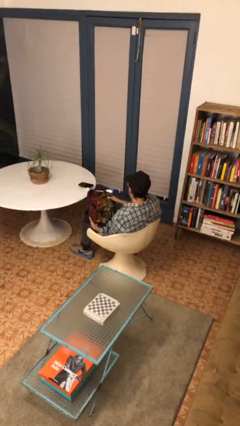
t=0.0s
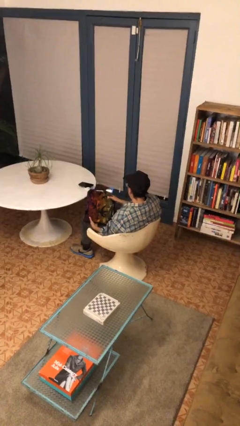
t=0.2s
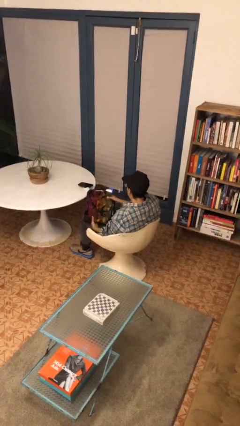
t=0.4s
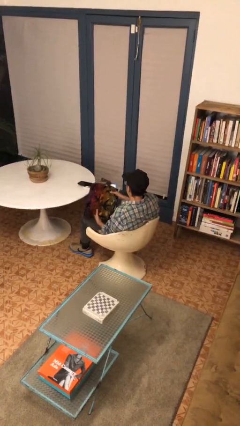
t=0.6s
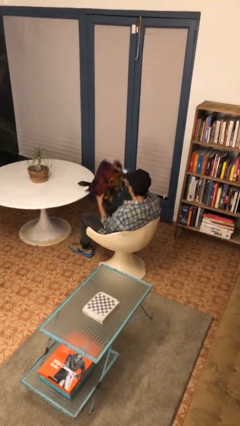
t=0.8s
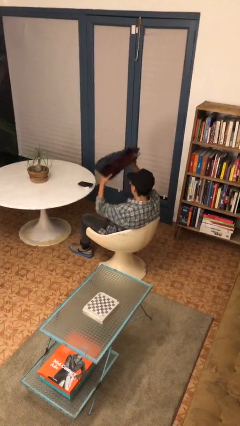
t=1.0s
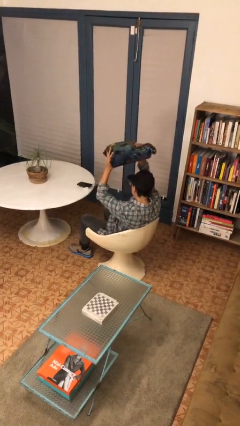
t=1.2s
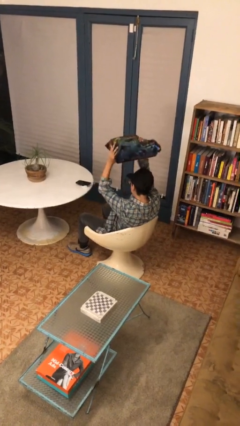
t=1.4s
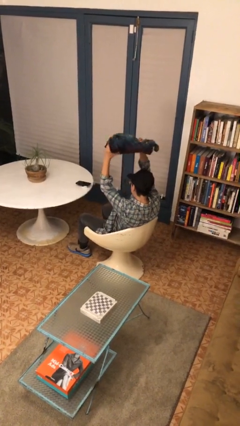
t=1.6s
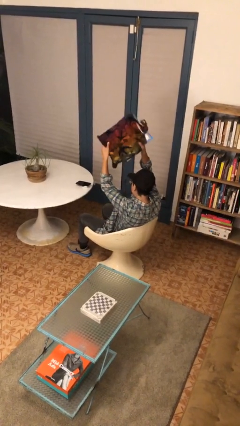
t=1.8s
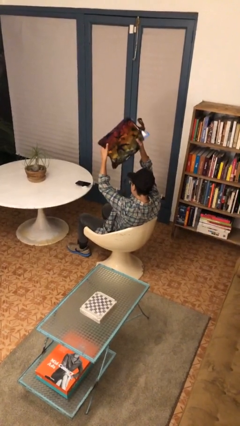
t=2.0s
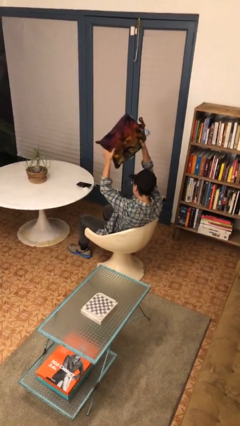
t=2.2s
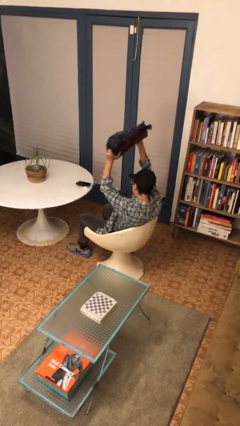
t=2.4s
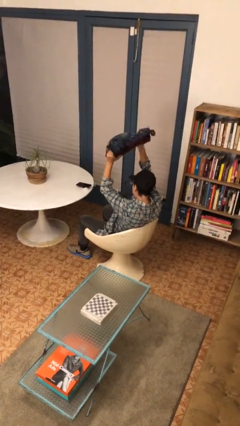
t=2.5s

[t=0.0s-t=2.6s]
person holds object above head

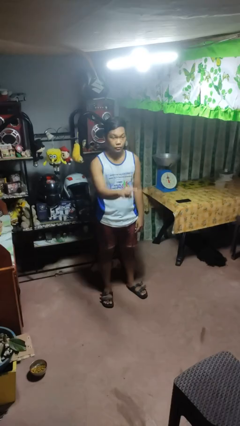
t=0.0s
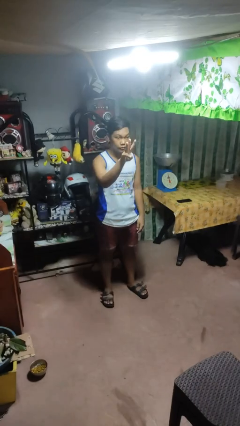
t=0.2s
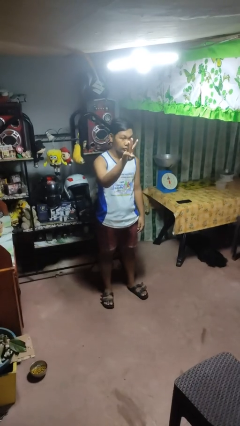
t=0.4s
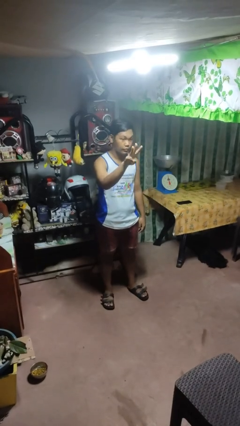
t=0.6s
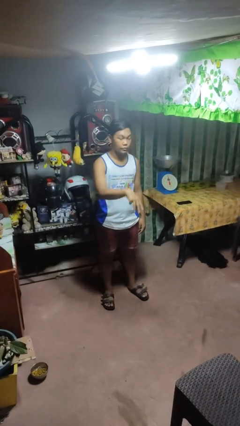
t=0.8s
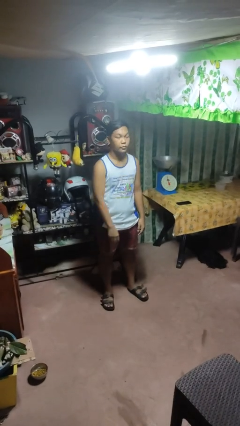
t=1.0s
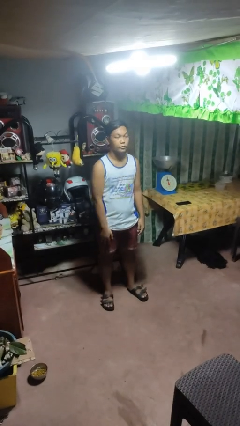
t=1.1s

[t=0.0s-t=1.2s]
person gestures number three

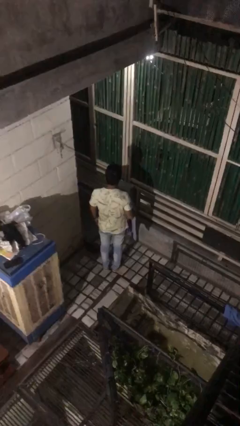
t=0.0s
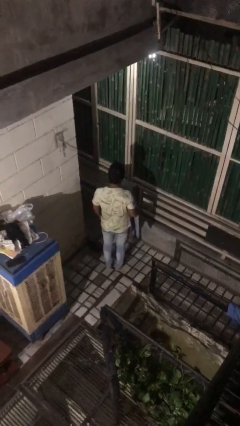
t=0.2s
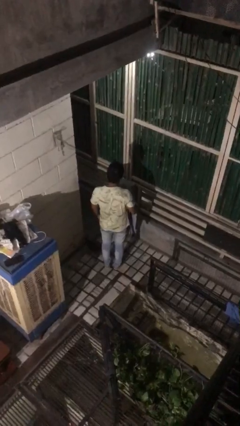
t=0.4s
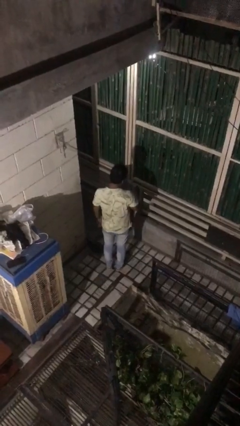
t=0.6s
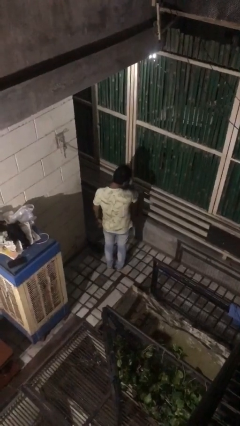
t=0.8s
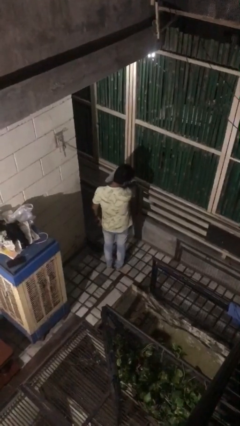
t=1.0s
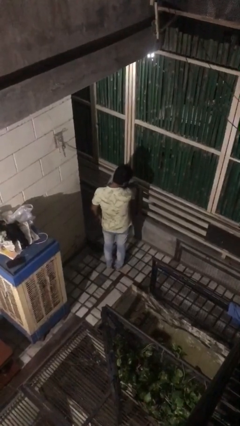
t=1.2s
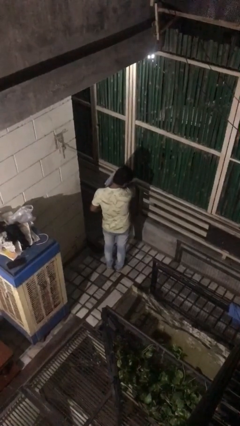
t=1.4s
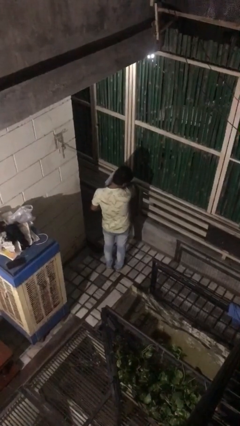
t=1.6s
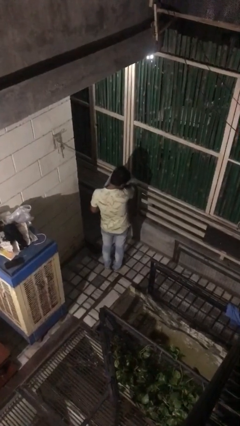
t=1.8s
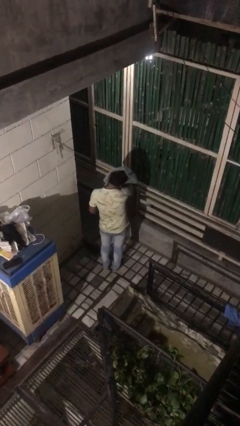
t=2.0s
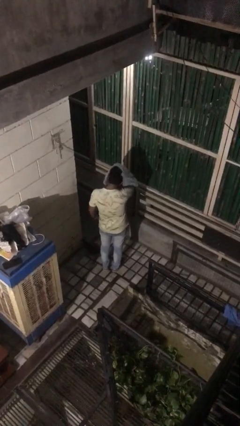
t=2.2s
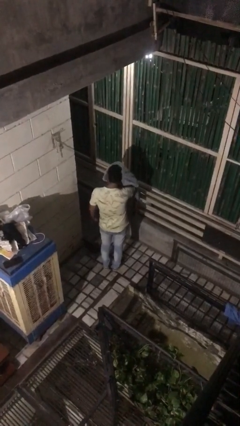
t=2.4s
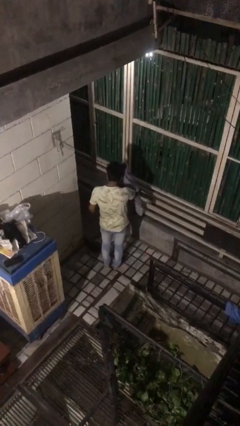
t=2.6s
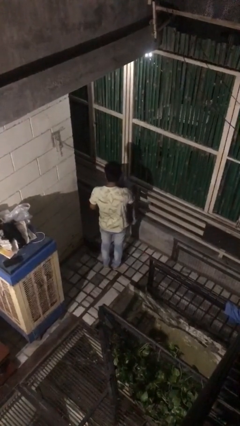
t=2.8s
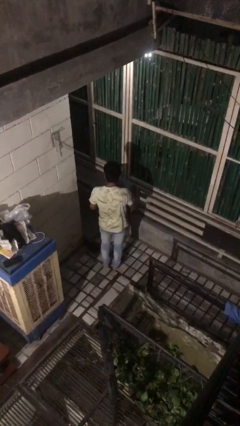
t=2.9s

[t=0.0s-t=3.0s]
person dries hair with towel

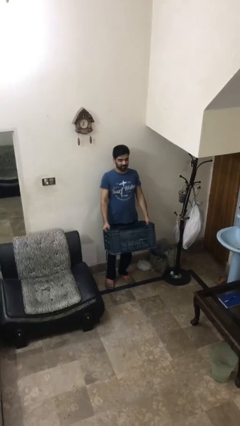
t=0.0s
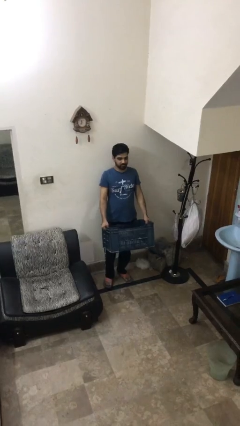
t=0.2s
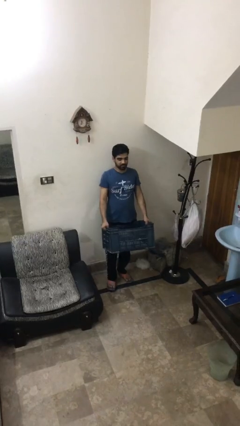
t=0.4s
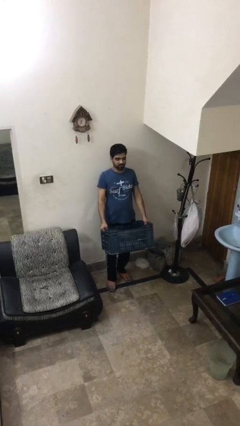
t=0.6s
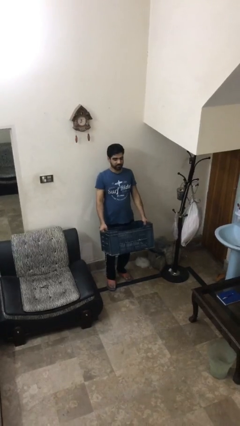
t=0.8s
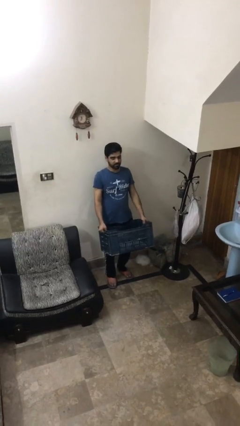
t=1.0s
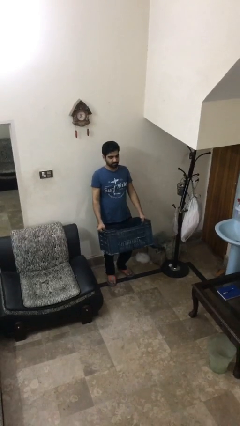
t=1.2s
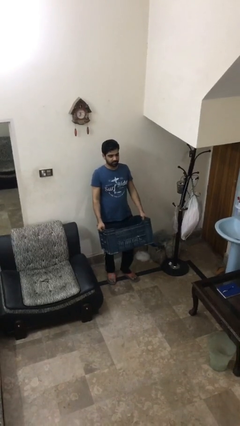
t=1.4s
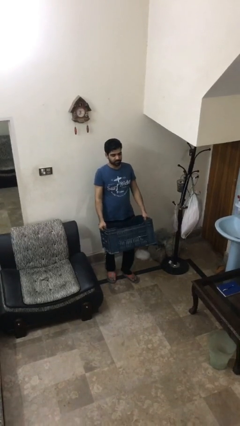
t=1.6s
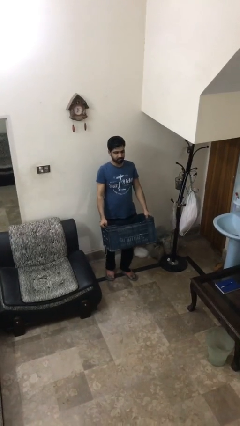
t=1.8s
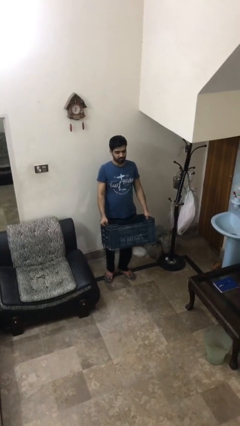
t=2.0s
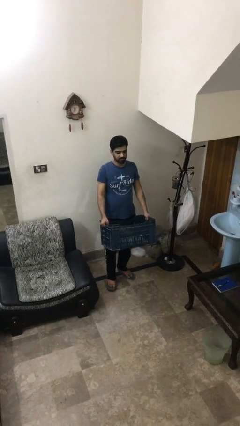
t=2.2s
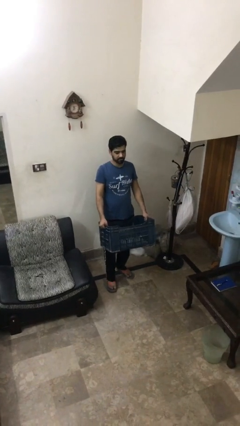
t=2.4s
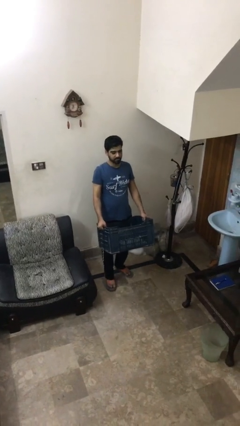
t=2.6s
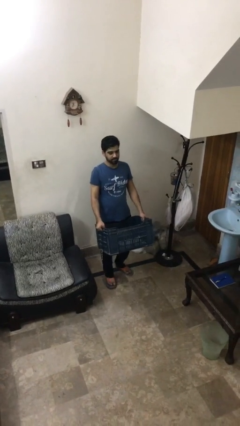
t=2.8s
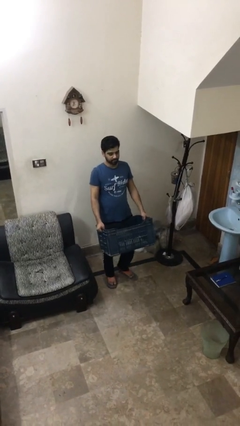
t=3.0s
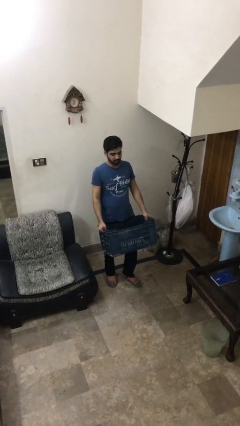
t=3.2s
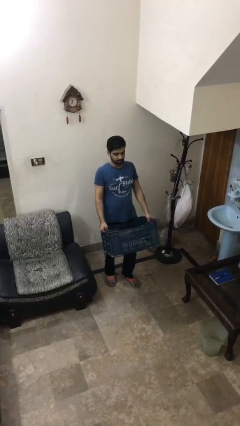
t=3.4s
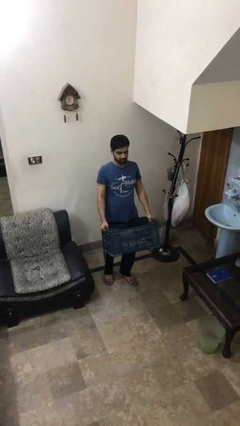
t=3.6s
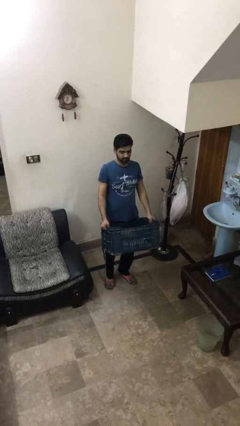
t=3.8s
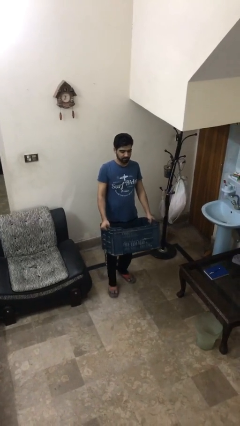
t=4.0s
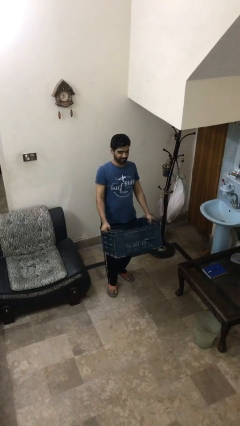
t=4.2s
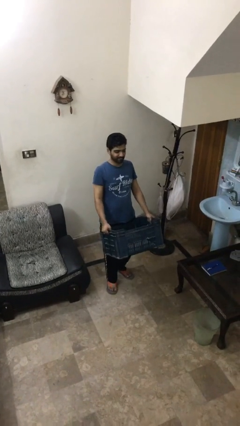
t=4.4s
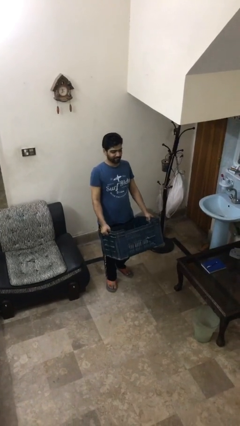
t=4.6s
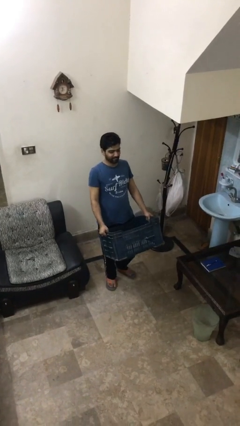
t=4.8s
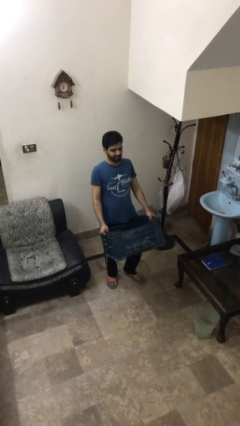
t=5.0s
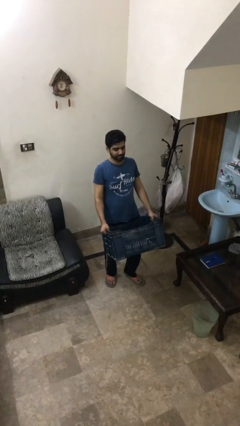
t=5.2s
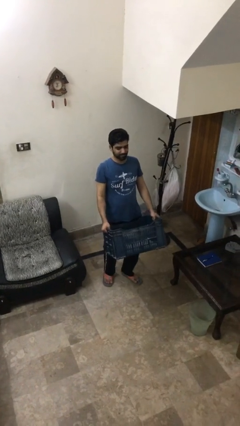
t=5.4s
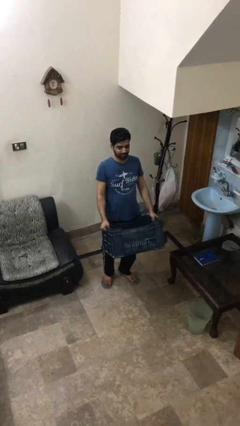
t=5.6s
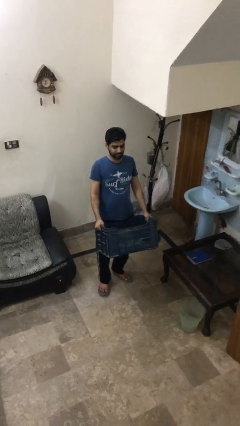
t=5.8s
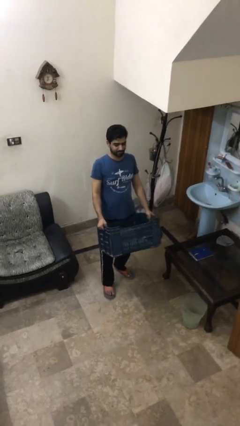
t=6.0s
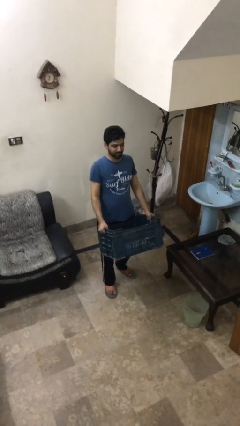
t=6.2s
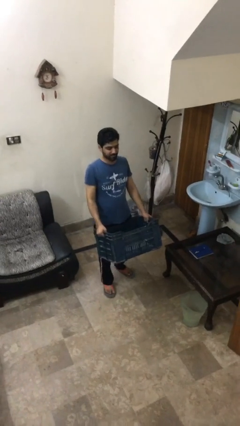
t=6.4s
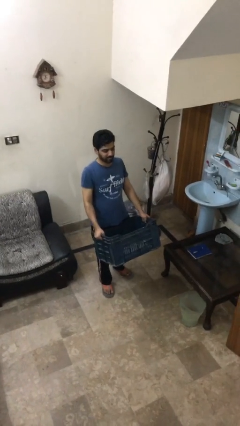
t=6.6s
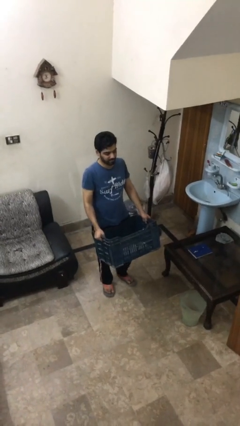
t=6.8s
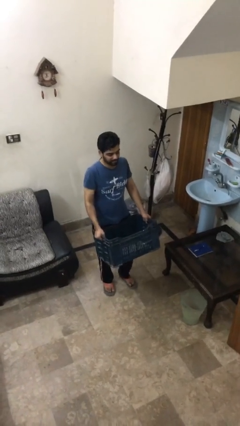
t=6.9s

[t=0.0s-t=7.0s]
person carries heavy object

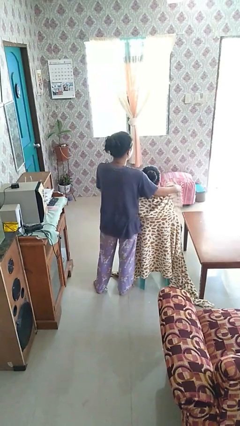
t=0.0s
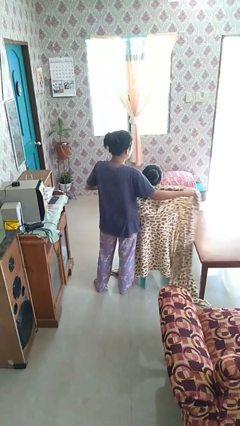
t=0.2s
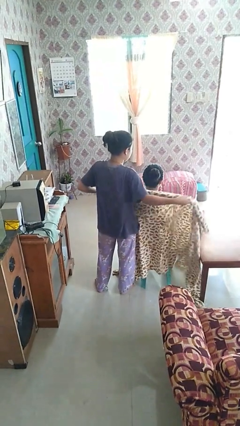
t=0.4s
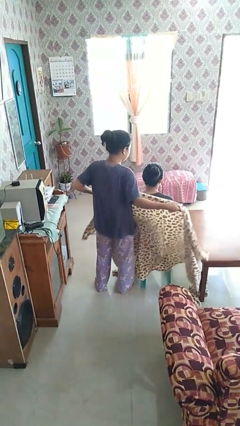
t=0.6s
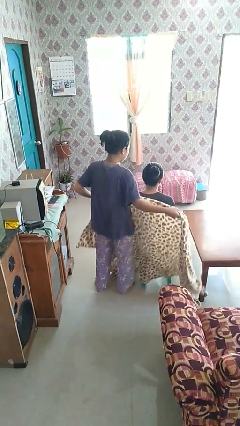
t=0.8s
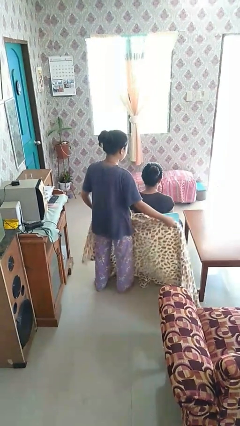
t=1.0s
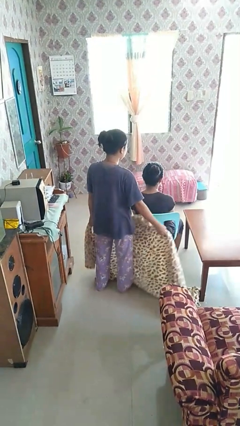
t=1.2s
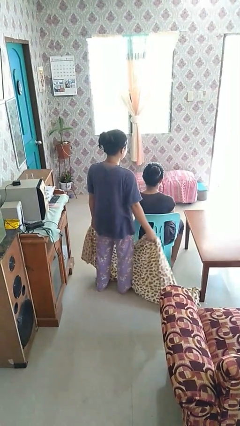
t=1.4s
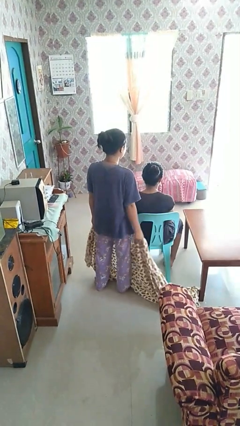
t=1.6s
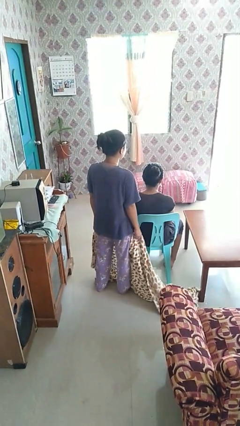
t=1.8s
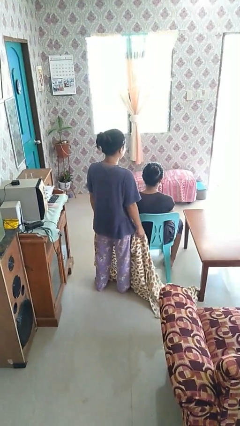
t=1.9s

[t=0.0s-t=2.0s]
person uncovers friend with blanket

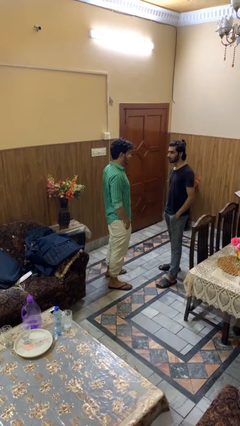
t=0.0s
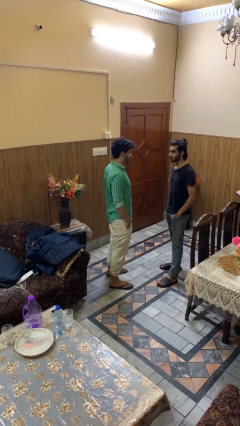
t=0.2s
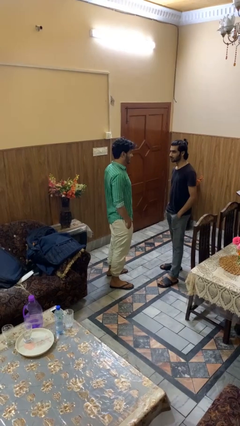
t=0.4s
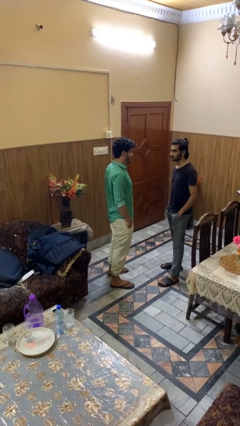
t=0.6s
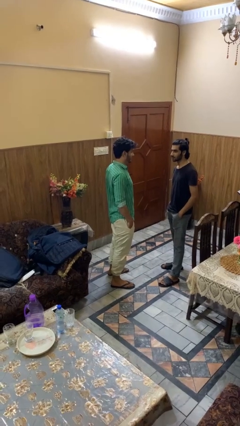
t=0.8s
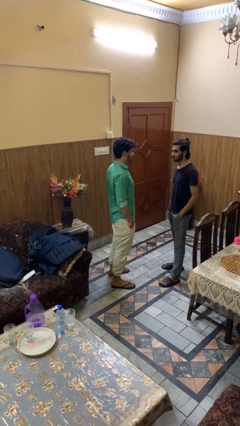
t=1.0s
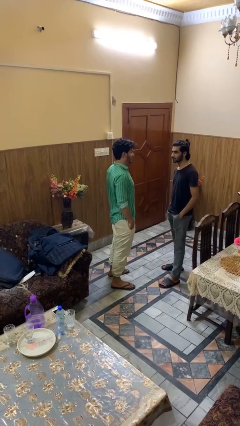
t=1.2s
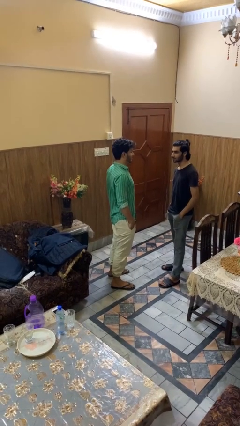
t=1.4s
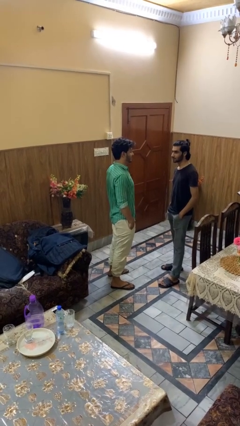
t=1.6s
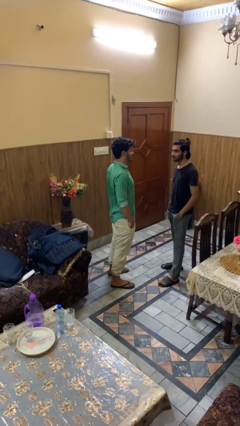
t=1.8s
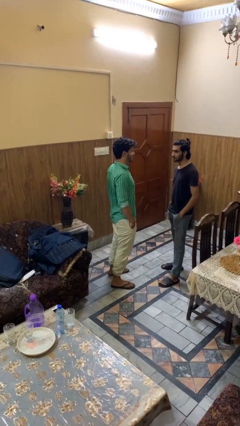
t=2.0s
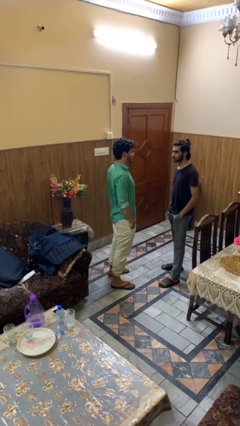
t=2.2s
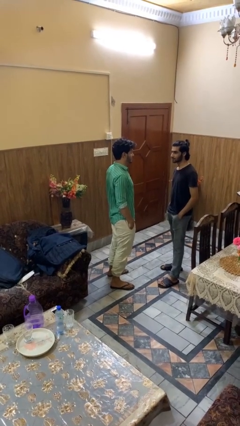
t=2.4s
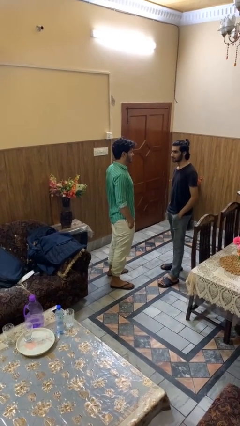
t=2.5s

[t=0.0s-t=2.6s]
person laughs with person
